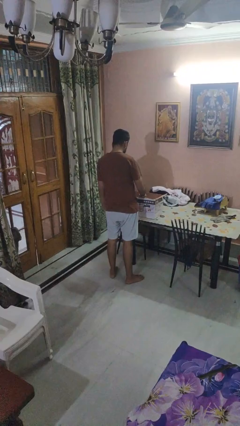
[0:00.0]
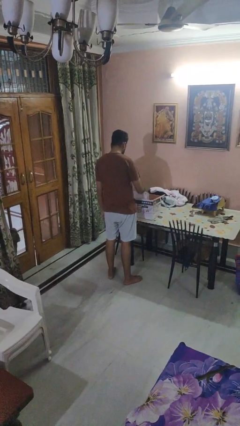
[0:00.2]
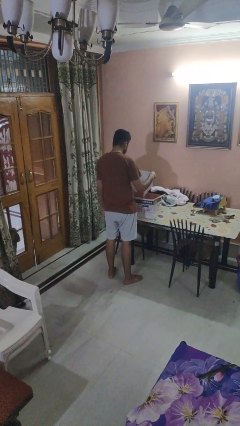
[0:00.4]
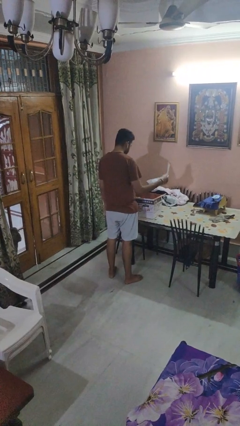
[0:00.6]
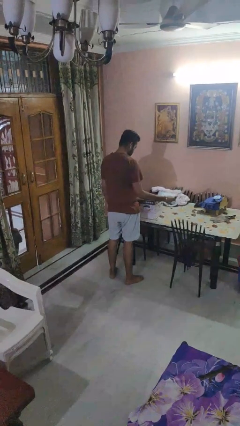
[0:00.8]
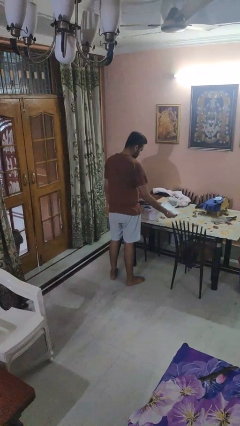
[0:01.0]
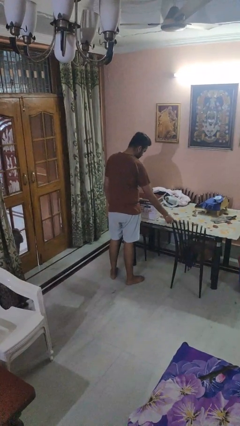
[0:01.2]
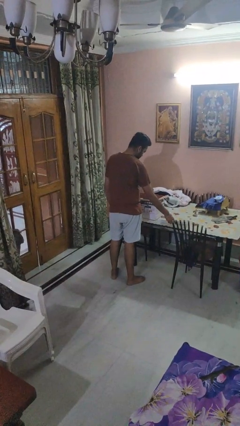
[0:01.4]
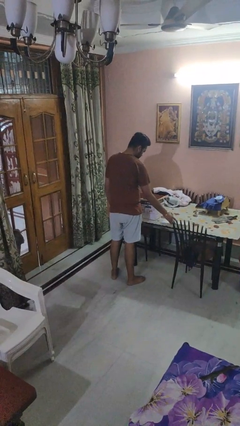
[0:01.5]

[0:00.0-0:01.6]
person takes object from box

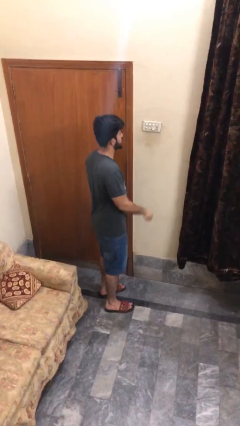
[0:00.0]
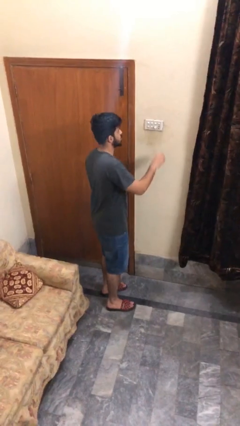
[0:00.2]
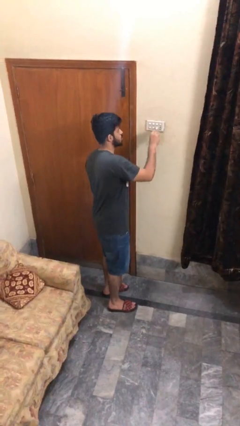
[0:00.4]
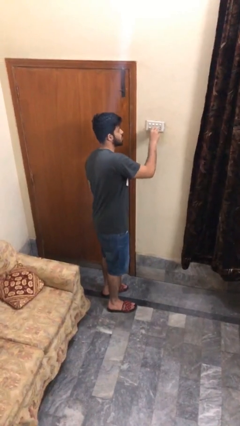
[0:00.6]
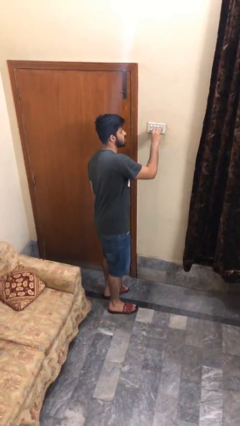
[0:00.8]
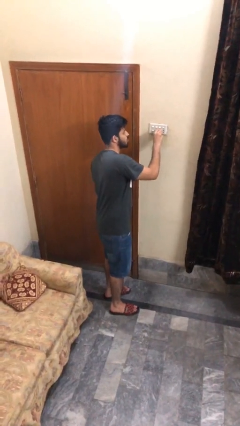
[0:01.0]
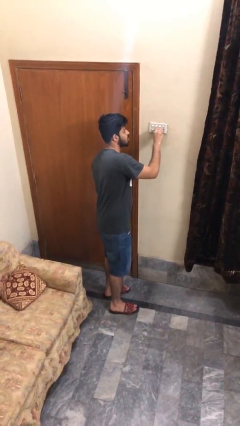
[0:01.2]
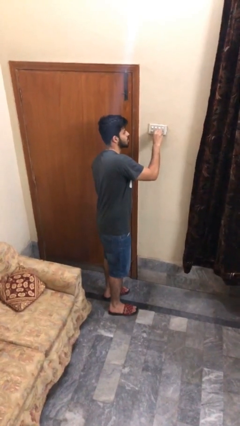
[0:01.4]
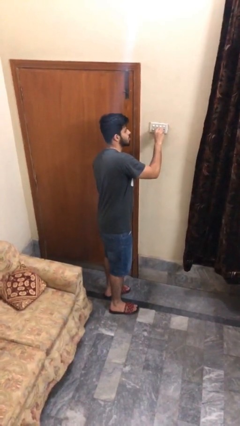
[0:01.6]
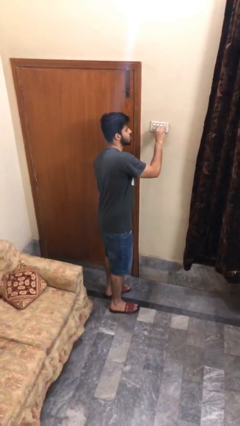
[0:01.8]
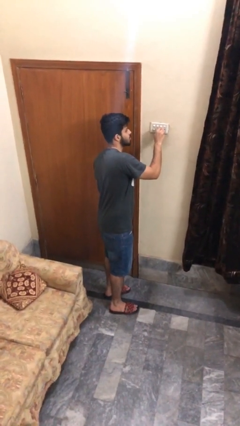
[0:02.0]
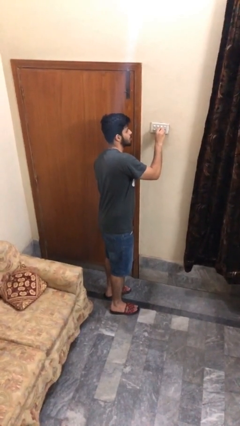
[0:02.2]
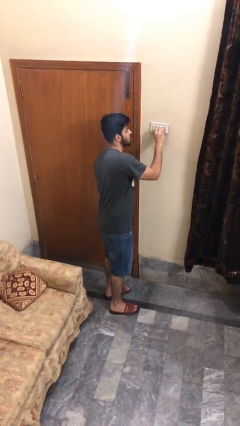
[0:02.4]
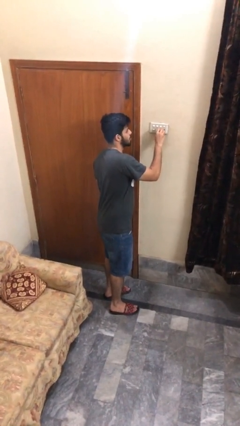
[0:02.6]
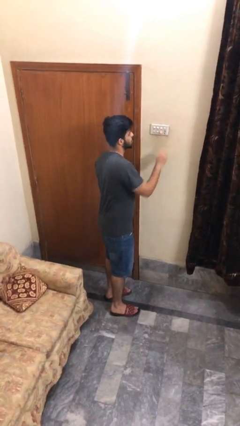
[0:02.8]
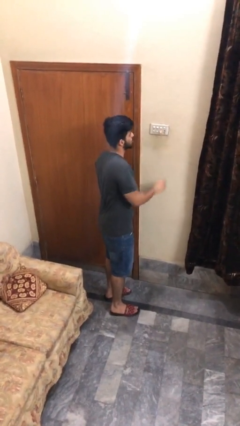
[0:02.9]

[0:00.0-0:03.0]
person adjusts thermostat

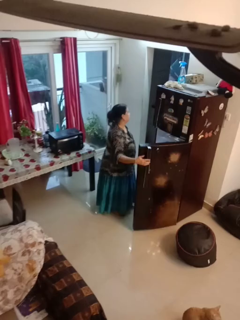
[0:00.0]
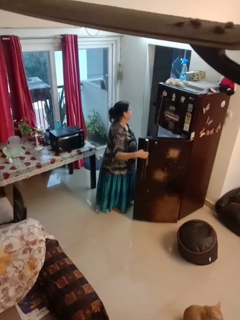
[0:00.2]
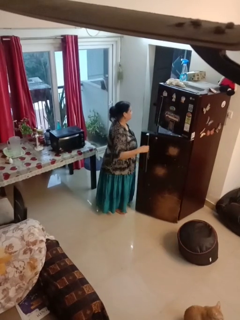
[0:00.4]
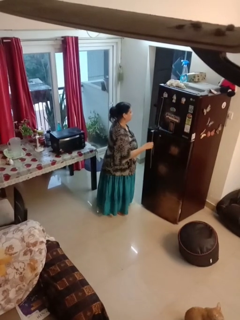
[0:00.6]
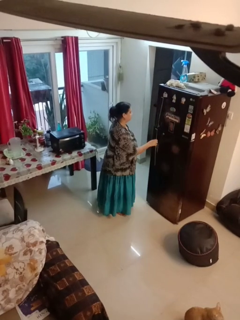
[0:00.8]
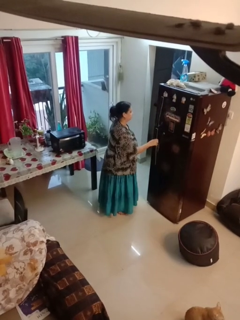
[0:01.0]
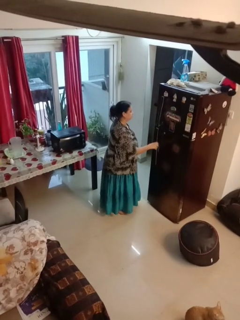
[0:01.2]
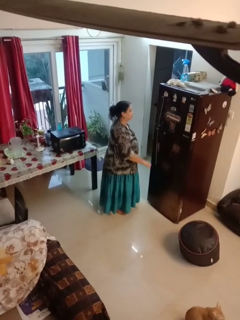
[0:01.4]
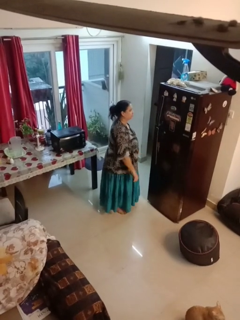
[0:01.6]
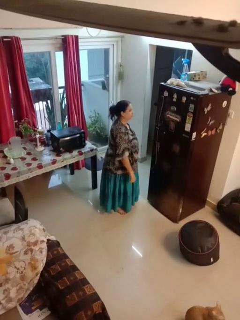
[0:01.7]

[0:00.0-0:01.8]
person closes refrigerator

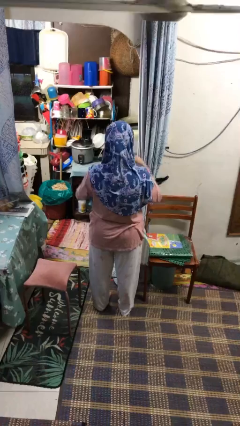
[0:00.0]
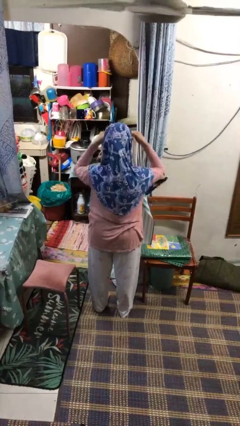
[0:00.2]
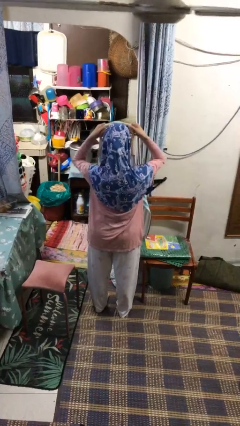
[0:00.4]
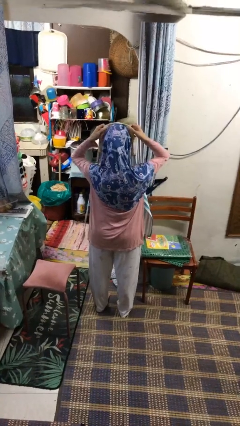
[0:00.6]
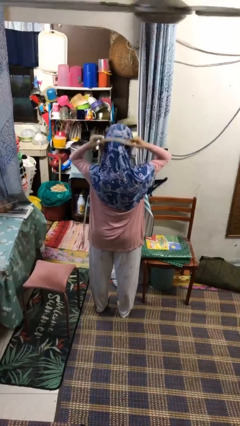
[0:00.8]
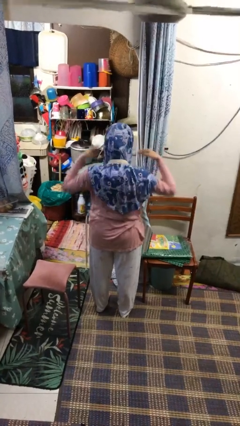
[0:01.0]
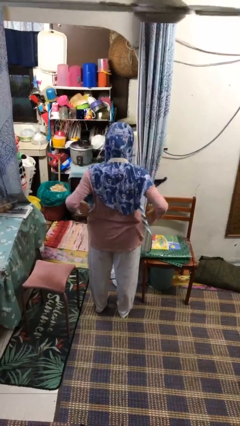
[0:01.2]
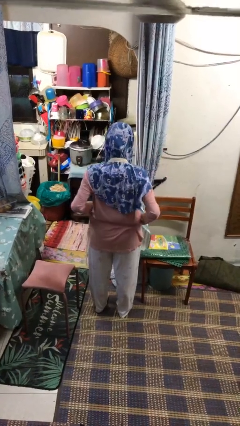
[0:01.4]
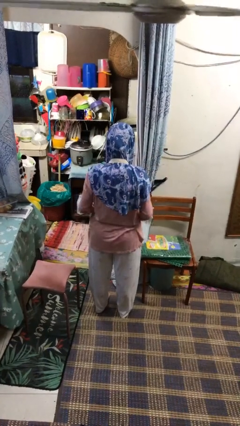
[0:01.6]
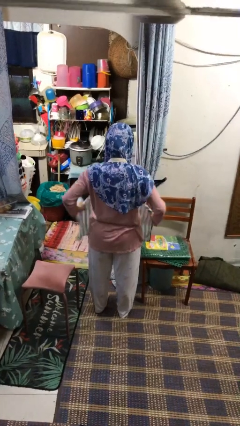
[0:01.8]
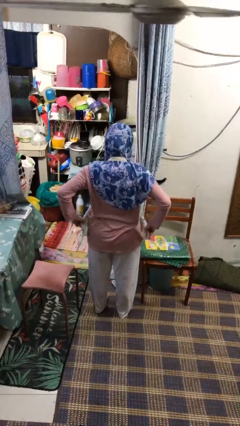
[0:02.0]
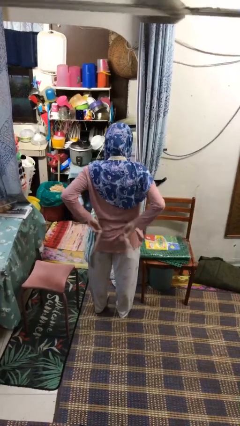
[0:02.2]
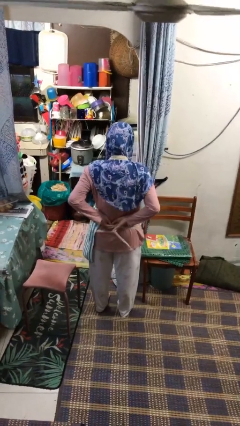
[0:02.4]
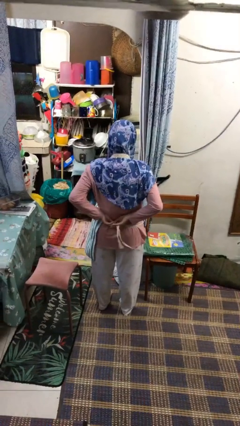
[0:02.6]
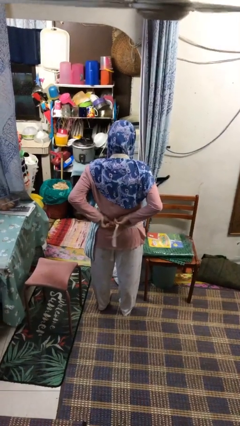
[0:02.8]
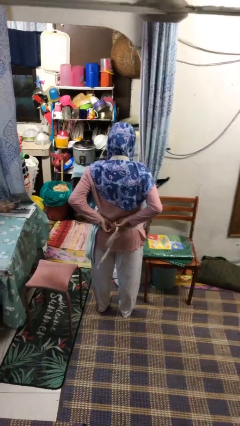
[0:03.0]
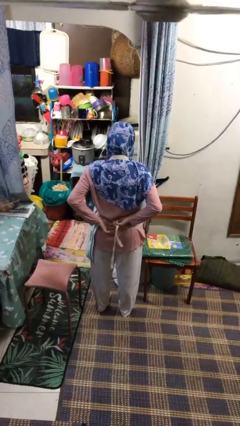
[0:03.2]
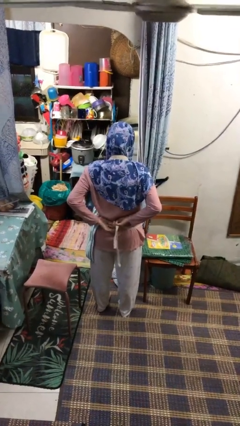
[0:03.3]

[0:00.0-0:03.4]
person puts on apron

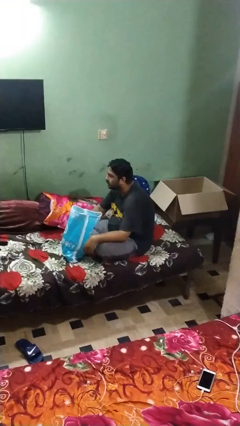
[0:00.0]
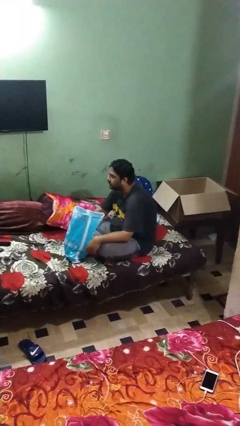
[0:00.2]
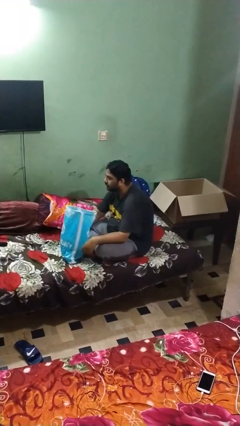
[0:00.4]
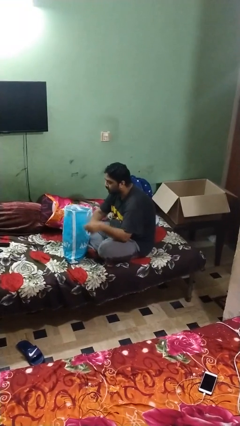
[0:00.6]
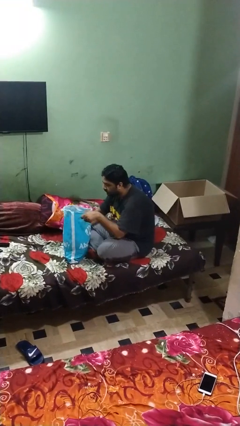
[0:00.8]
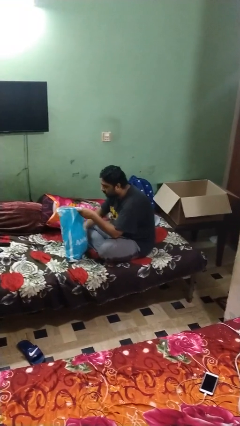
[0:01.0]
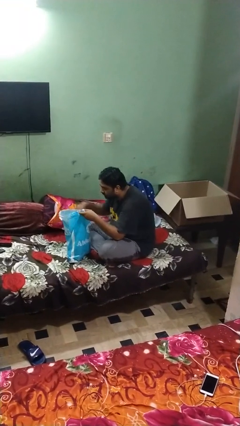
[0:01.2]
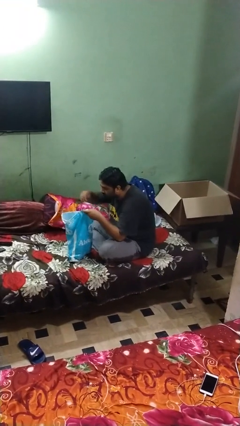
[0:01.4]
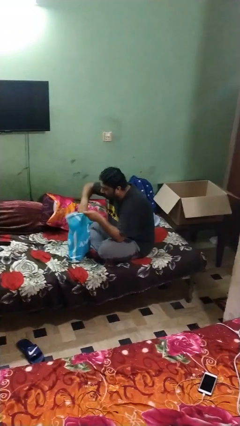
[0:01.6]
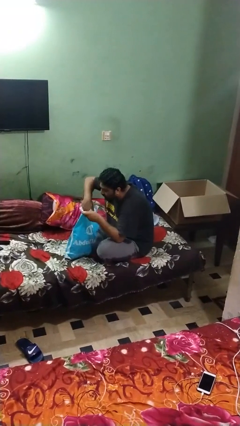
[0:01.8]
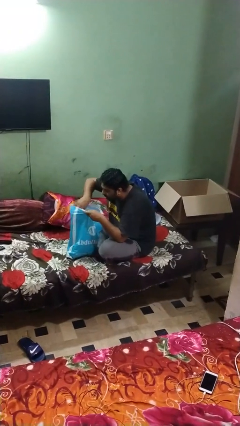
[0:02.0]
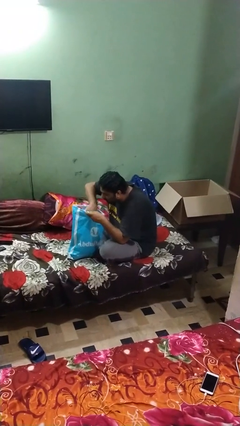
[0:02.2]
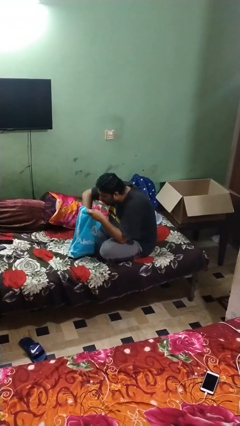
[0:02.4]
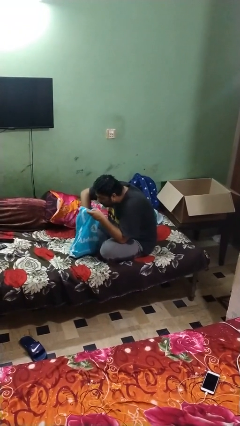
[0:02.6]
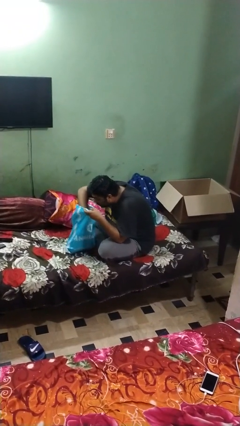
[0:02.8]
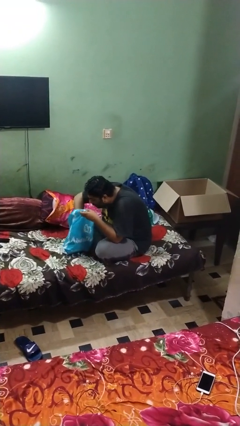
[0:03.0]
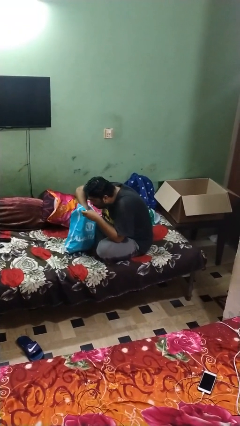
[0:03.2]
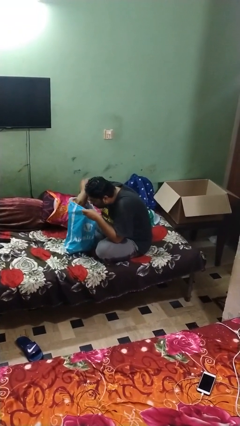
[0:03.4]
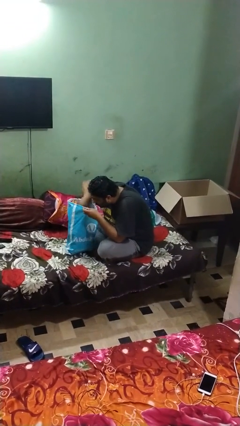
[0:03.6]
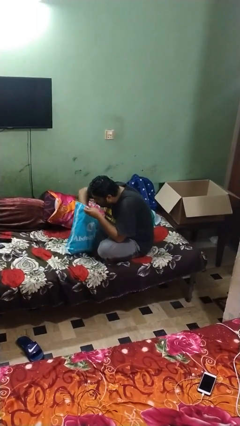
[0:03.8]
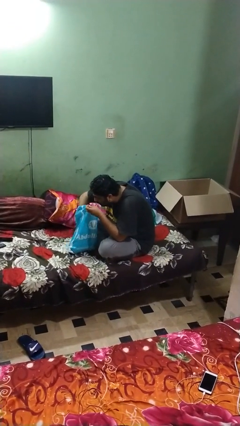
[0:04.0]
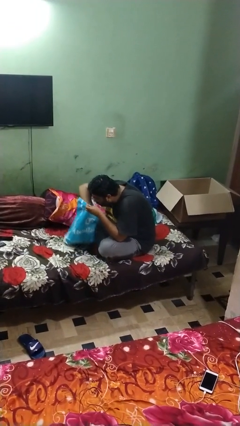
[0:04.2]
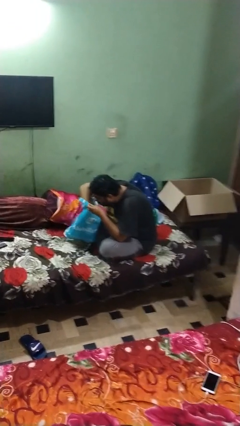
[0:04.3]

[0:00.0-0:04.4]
person searches in bag

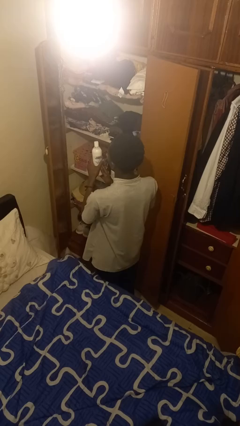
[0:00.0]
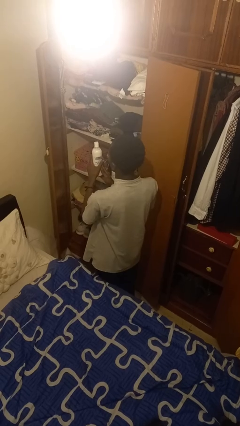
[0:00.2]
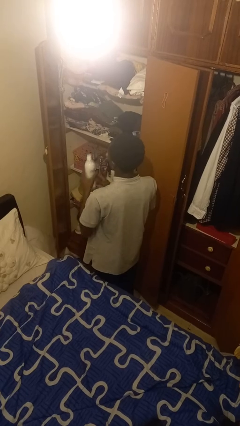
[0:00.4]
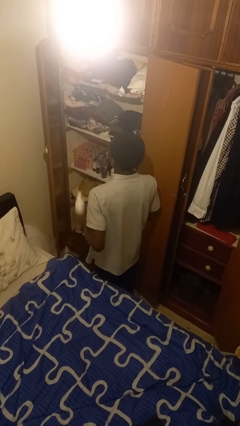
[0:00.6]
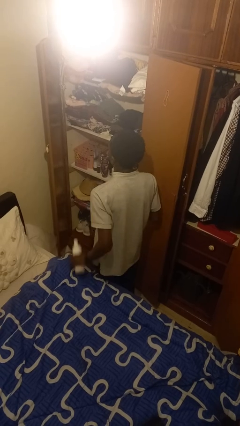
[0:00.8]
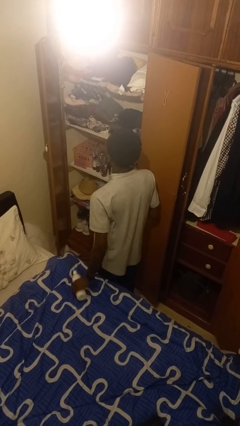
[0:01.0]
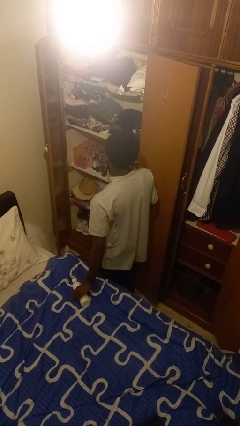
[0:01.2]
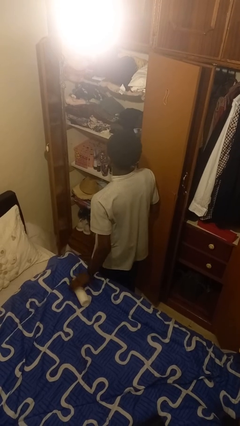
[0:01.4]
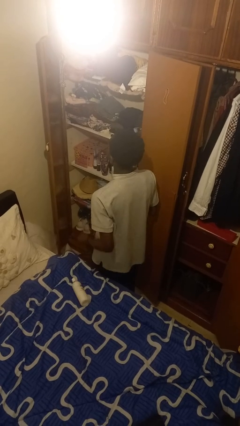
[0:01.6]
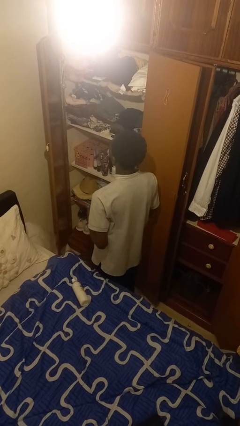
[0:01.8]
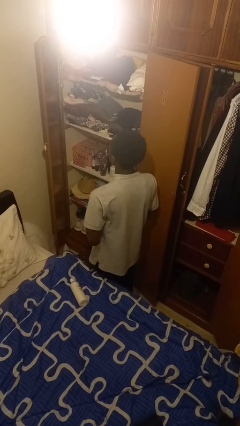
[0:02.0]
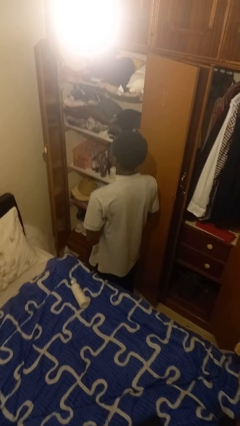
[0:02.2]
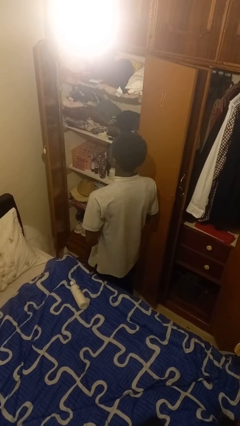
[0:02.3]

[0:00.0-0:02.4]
person puts down object on bed

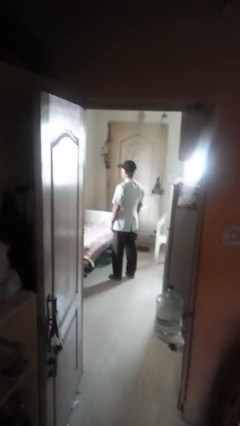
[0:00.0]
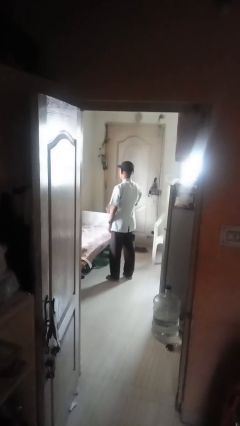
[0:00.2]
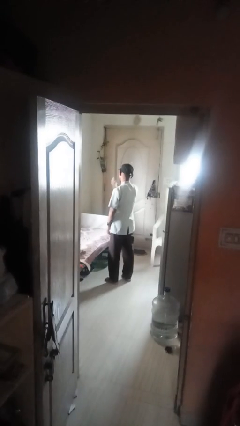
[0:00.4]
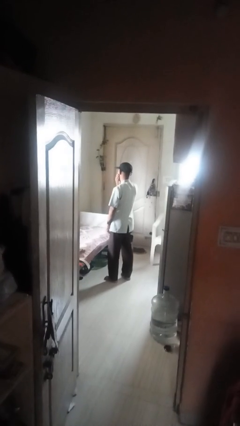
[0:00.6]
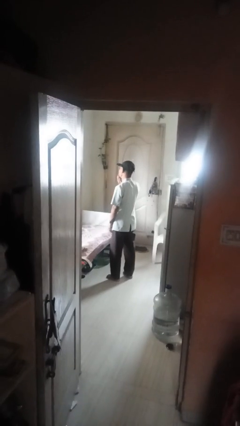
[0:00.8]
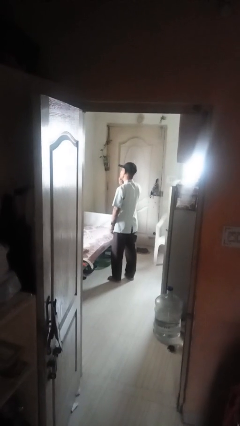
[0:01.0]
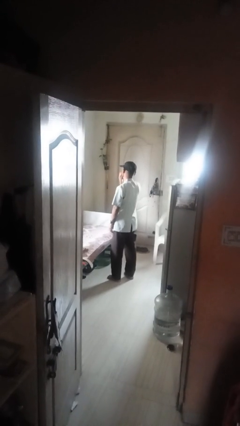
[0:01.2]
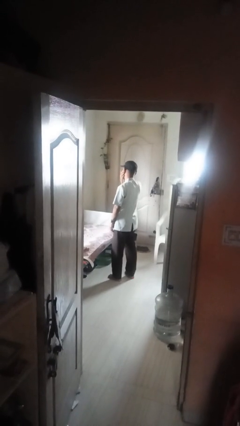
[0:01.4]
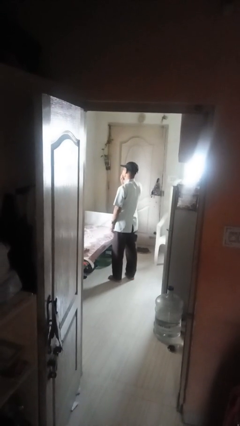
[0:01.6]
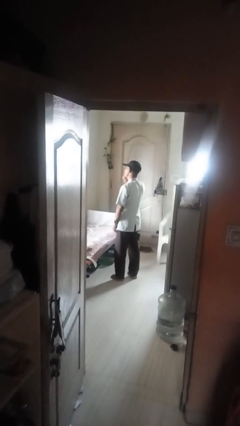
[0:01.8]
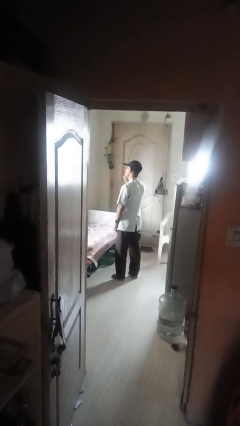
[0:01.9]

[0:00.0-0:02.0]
person strokes chin
